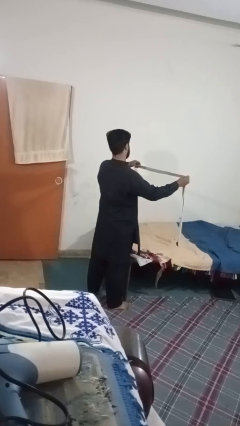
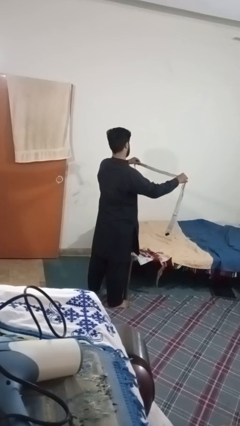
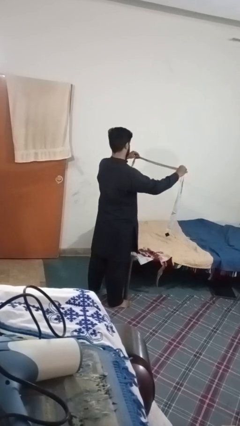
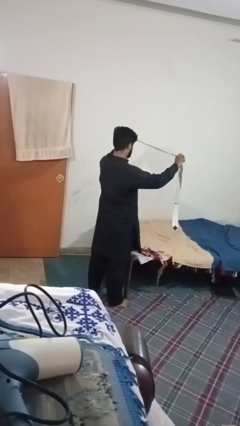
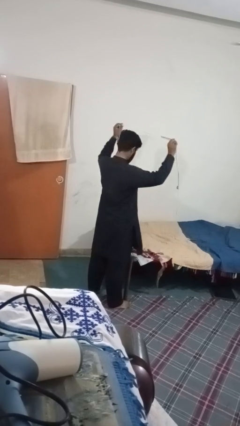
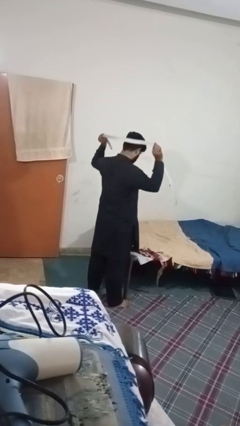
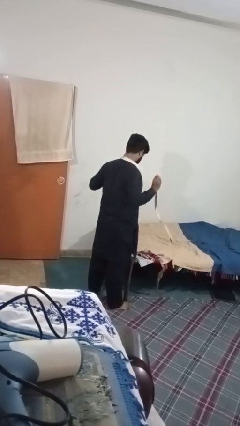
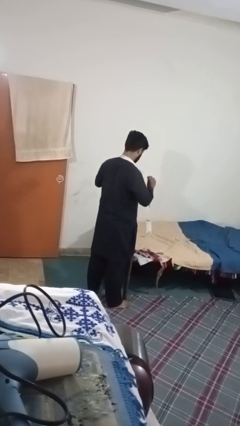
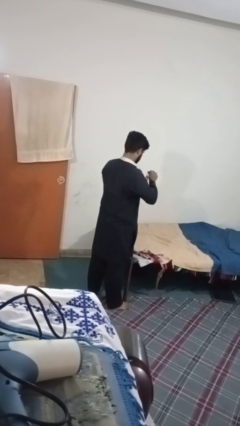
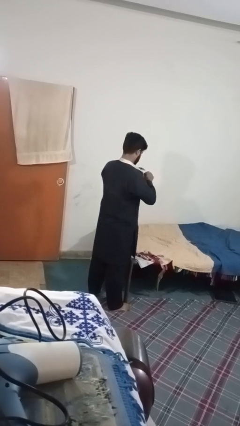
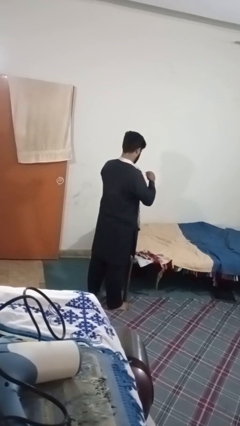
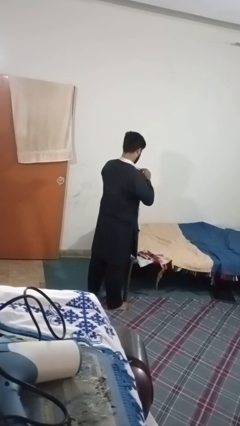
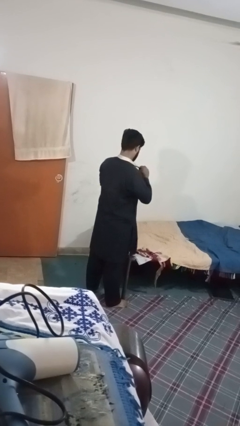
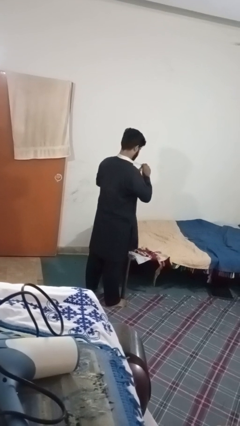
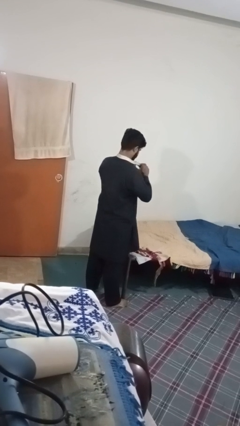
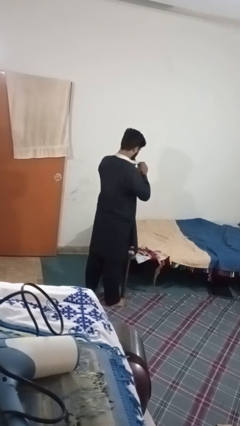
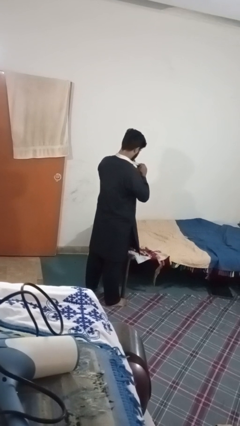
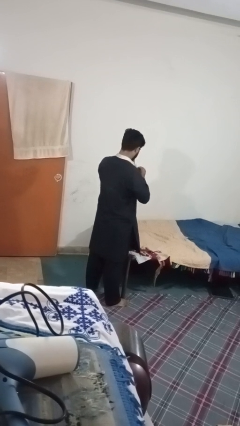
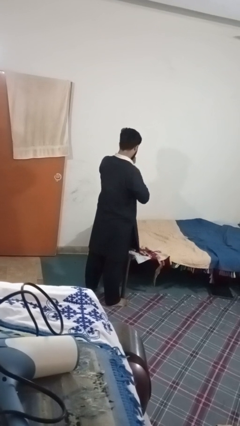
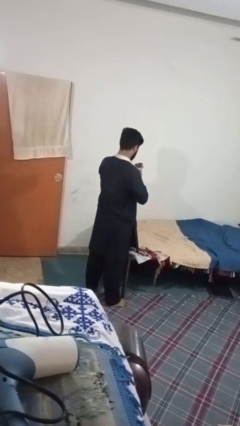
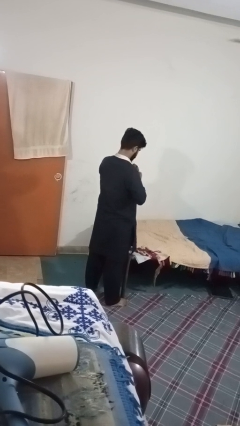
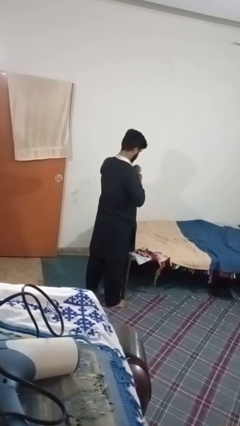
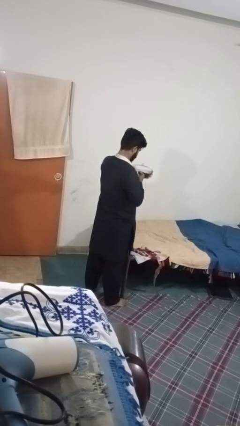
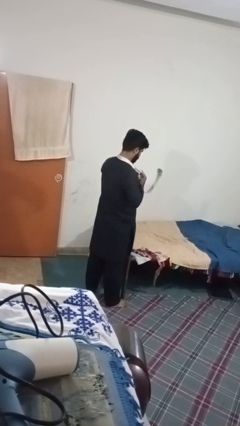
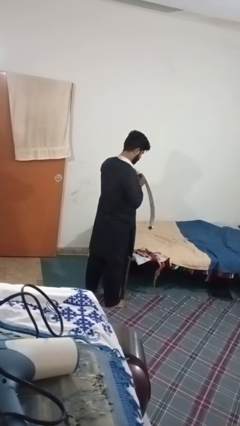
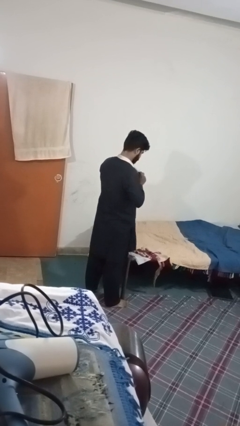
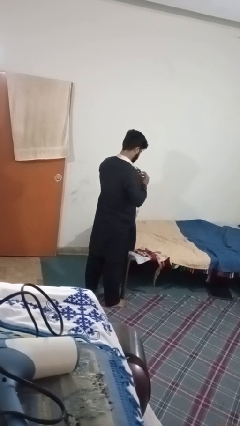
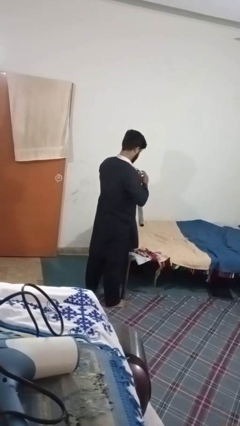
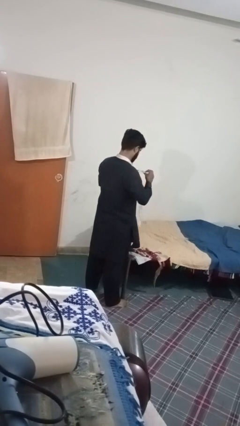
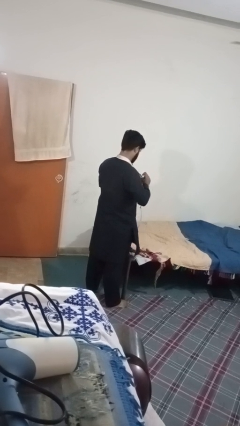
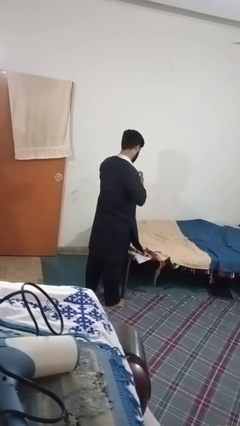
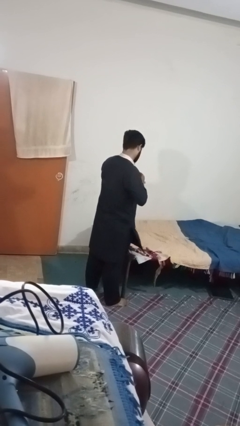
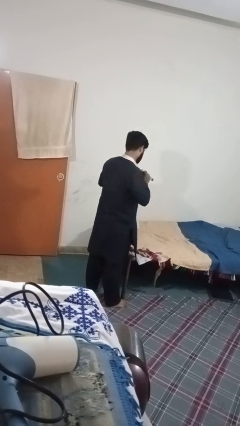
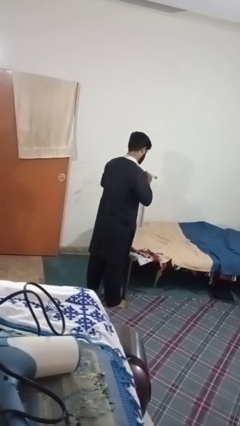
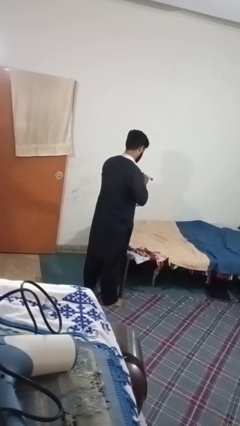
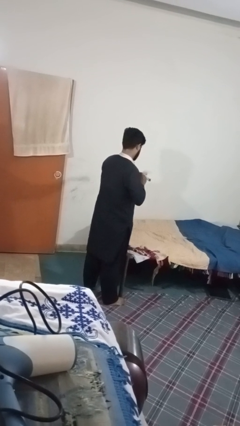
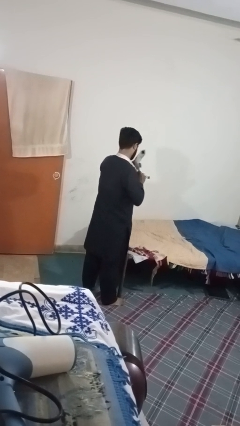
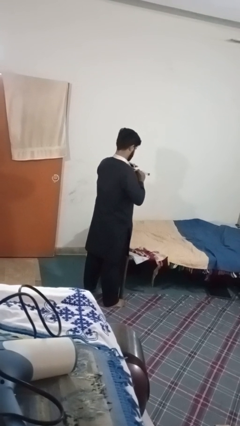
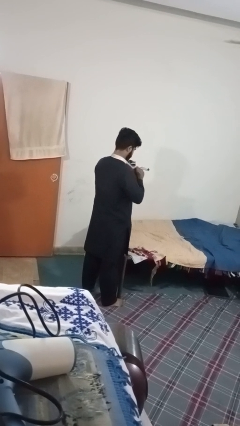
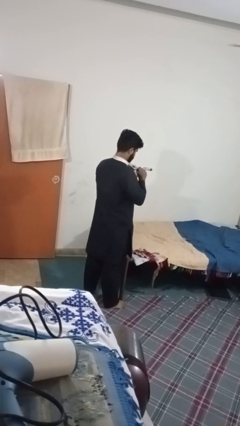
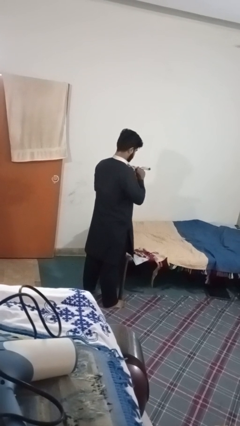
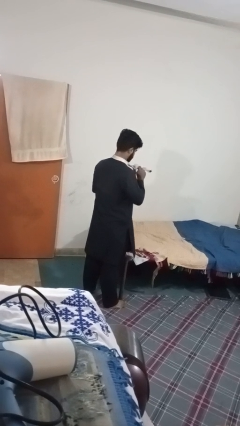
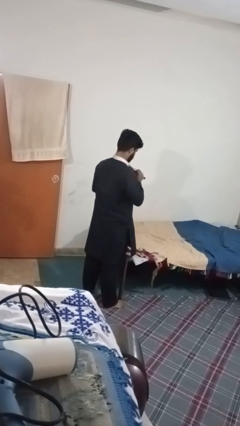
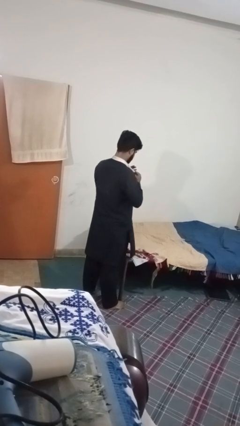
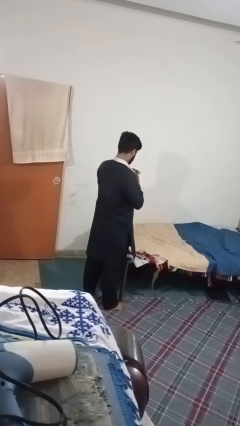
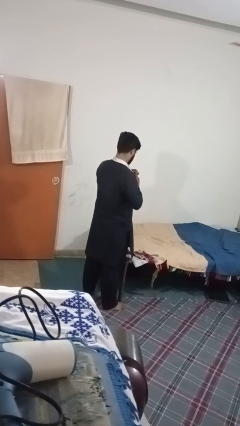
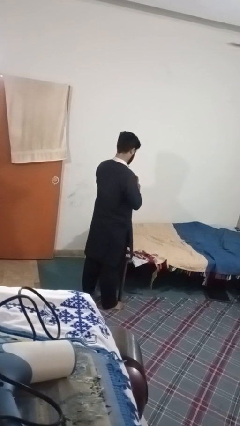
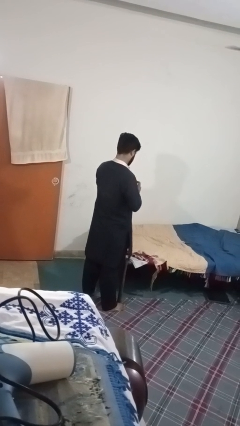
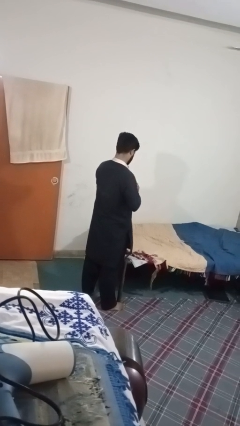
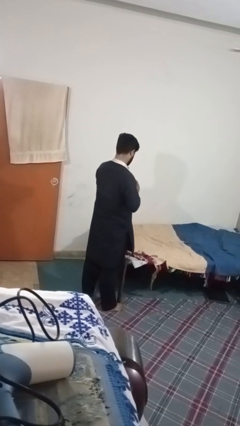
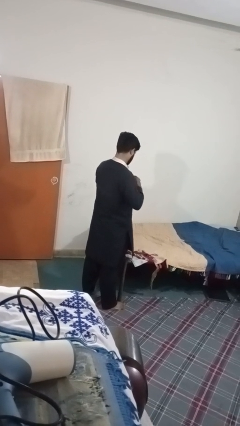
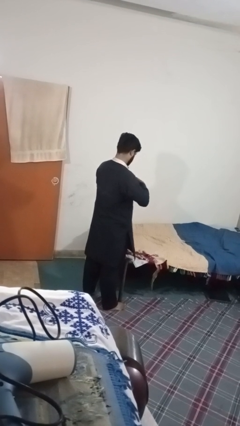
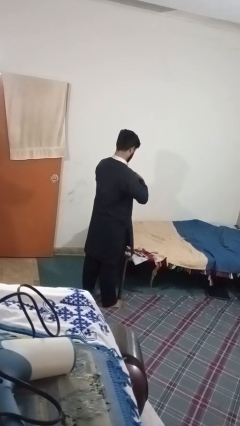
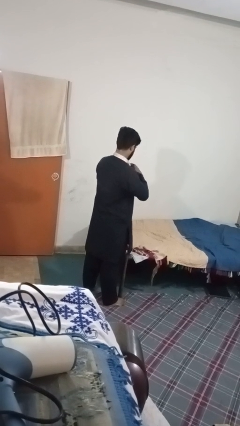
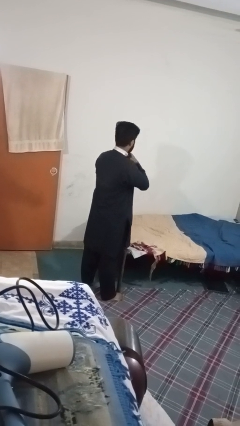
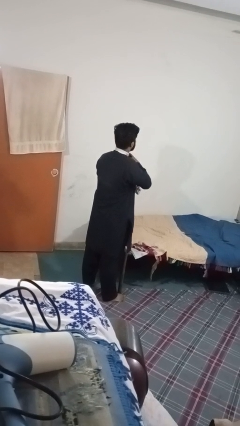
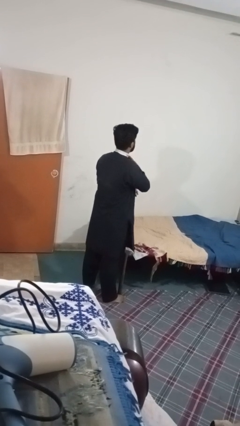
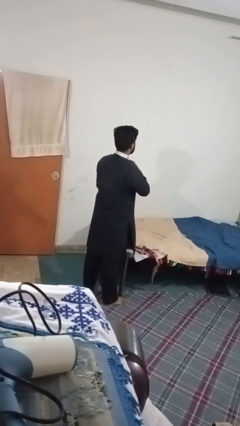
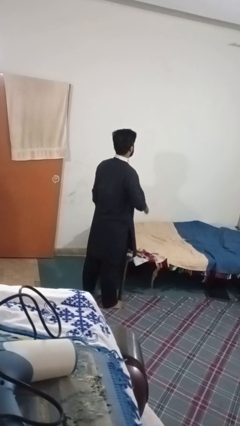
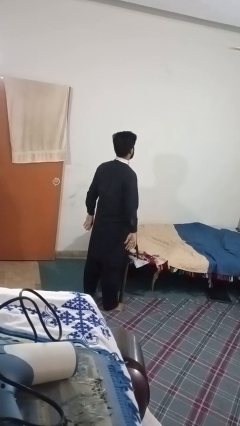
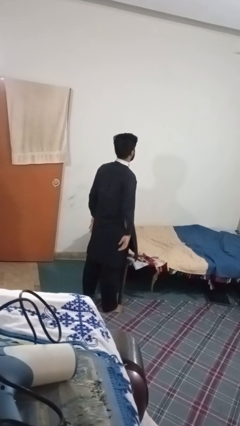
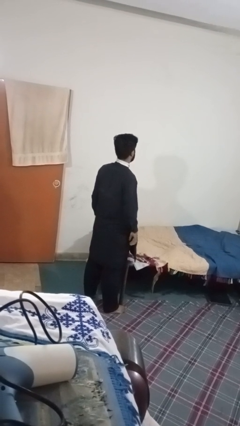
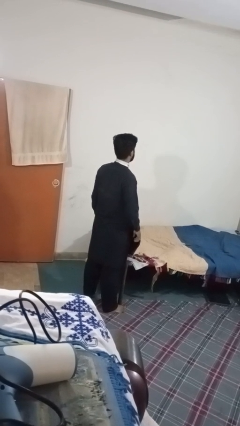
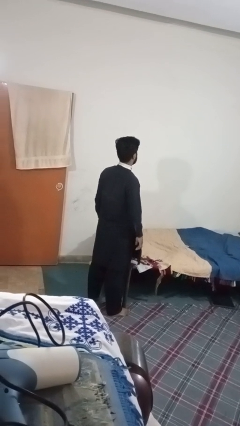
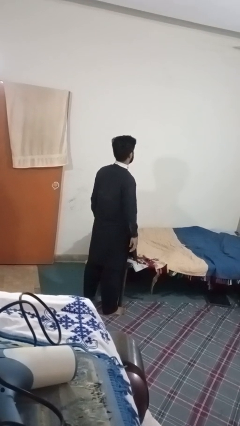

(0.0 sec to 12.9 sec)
person puts on necktie

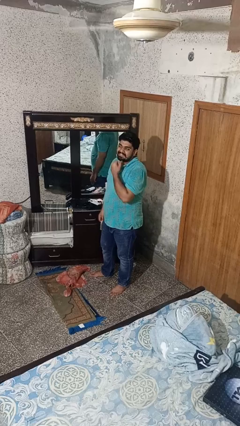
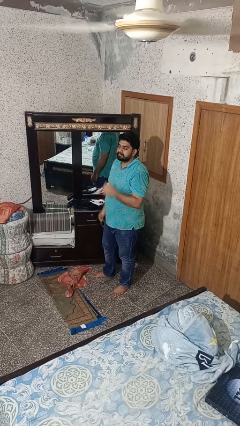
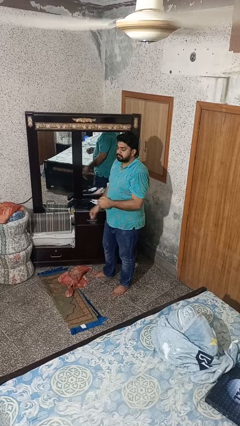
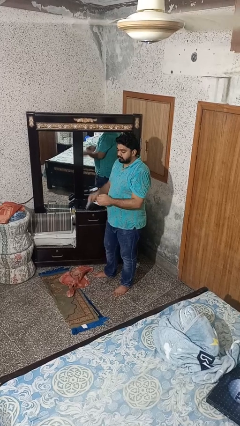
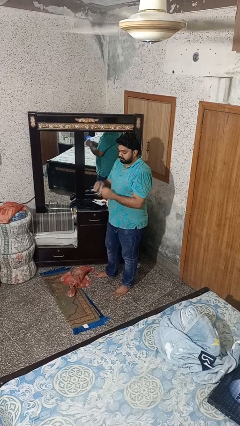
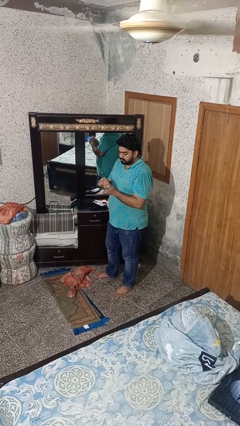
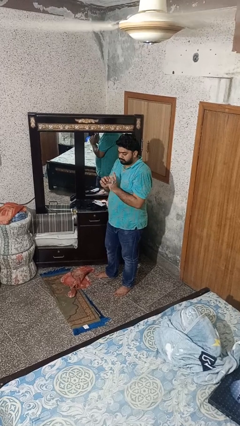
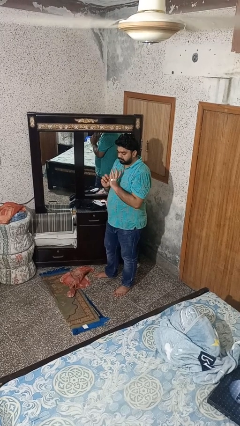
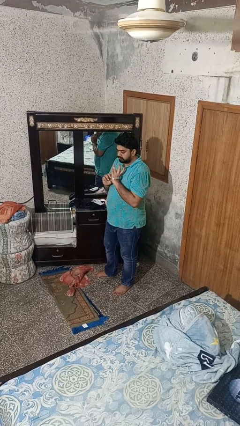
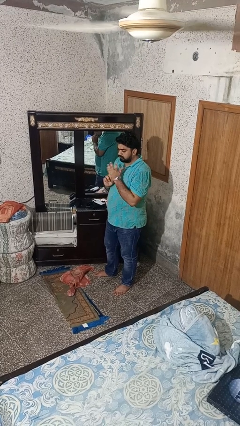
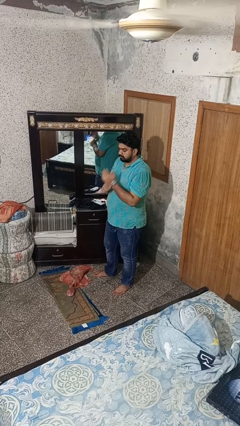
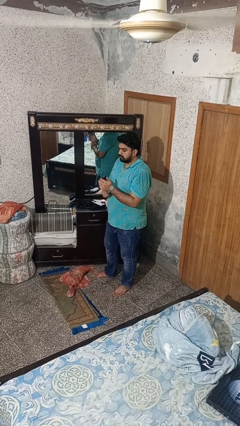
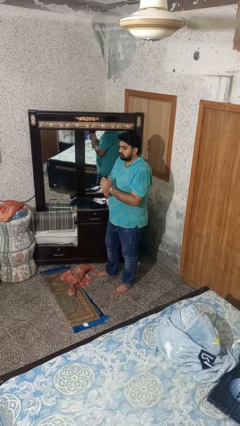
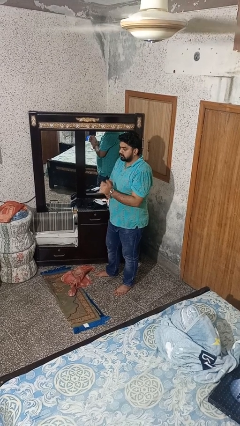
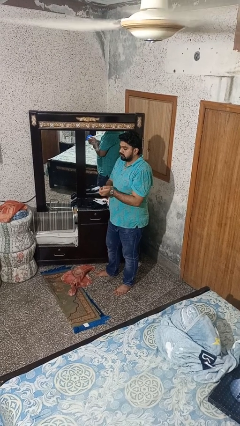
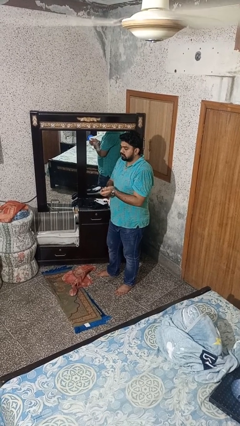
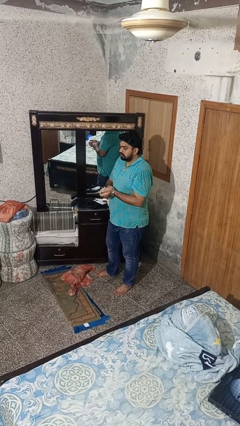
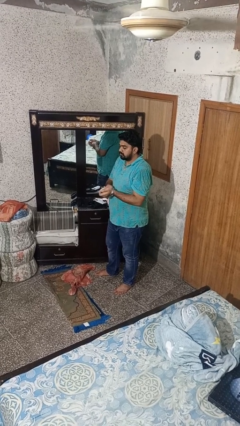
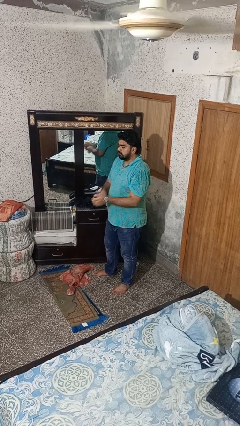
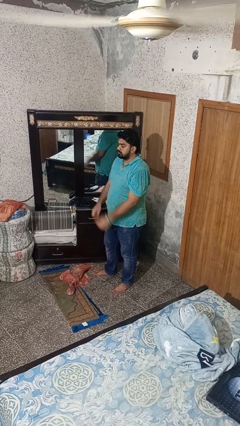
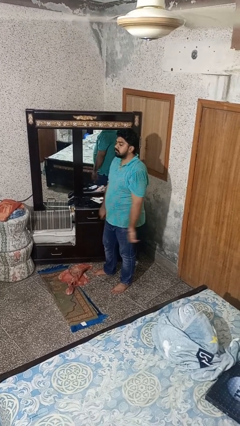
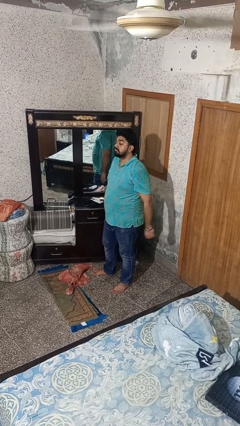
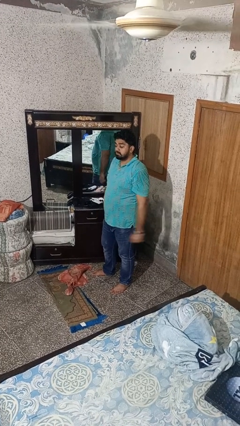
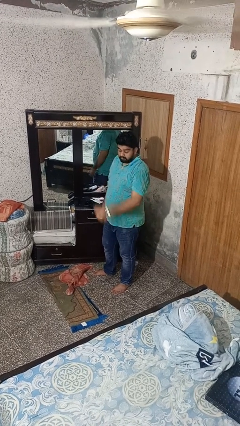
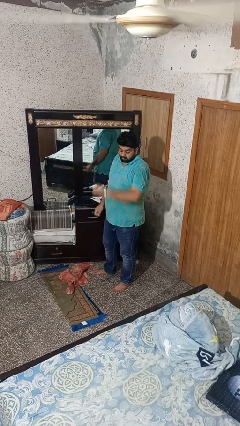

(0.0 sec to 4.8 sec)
person puts on wristwatch

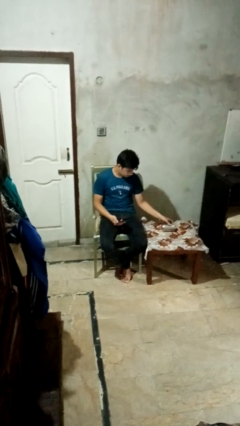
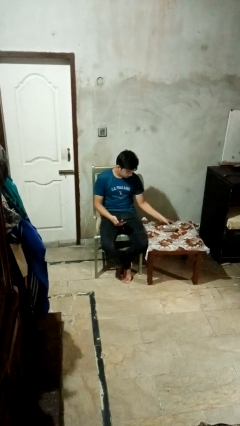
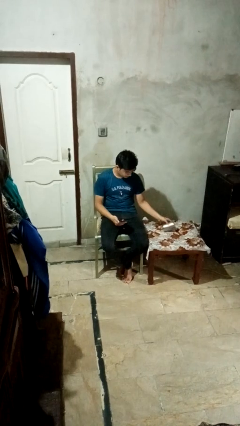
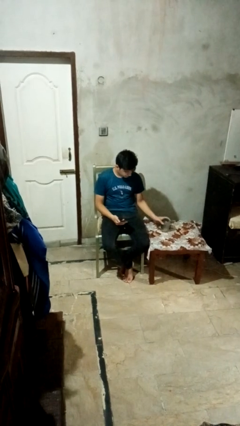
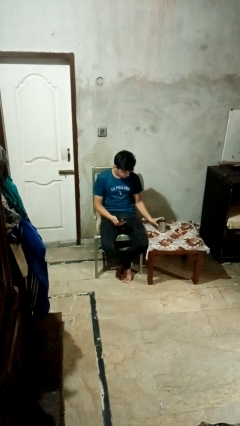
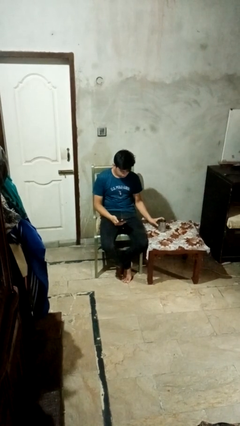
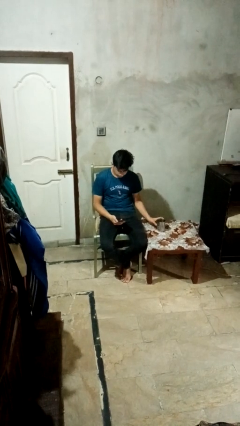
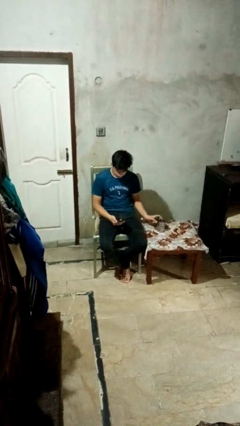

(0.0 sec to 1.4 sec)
person sets upright glass
